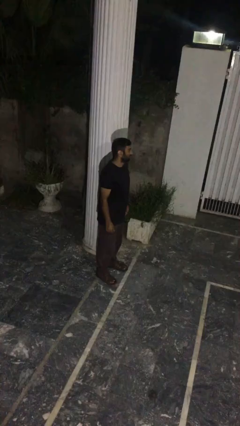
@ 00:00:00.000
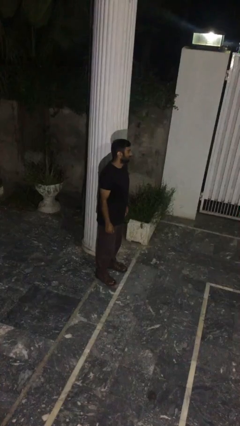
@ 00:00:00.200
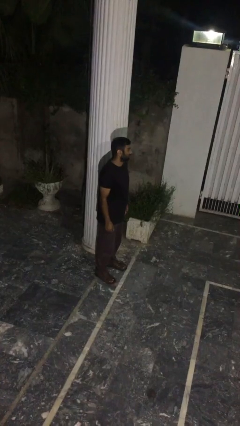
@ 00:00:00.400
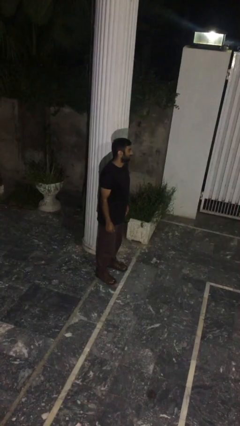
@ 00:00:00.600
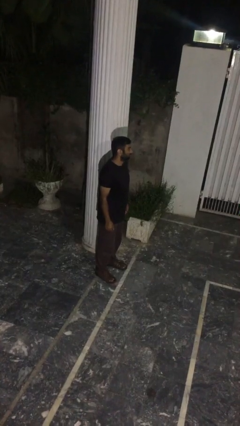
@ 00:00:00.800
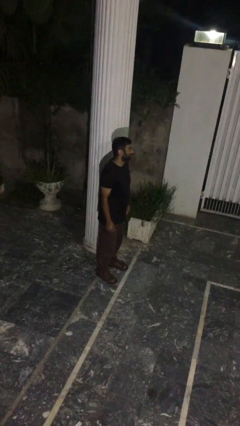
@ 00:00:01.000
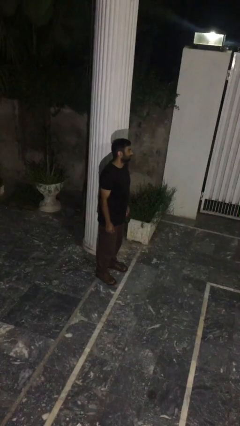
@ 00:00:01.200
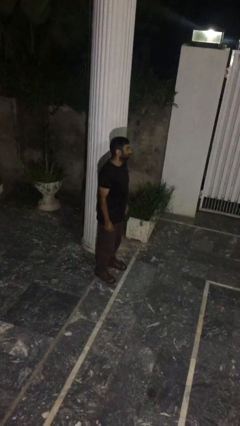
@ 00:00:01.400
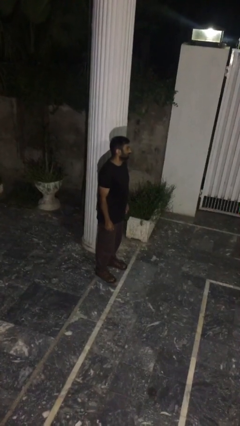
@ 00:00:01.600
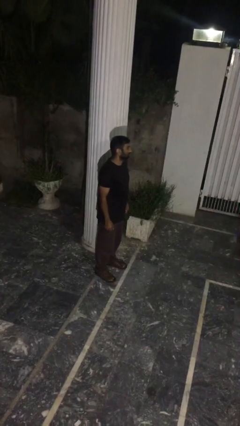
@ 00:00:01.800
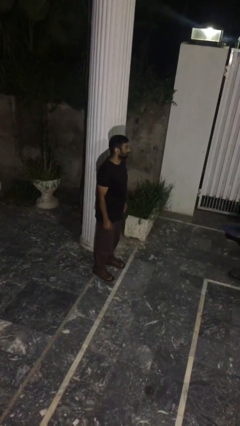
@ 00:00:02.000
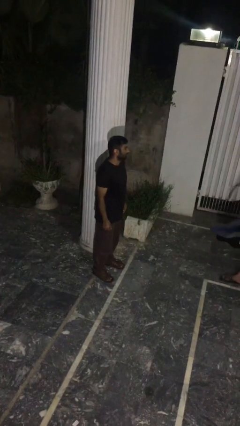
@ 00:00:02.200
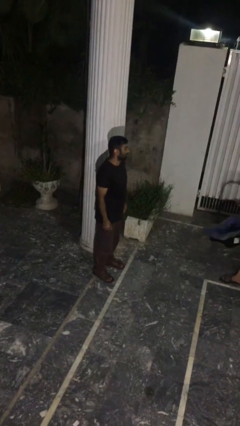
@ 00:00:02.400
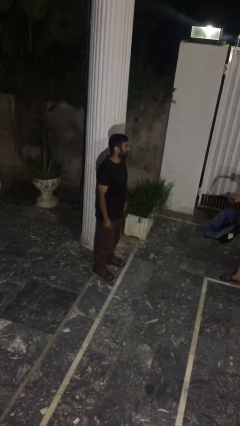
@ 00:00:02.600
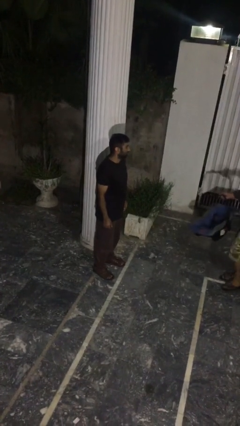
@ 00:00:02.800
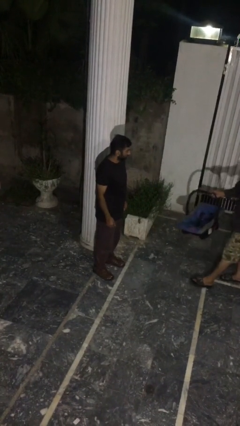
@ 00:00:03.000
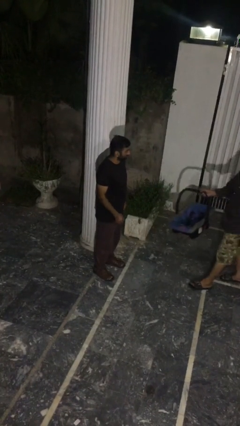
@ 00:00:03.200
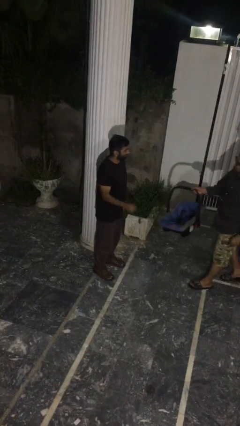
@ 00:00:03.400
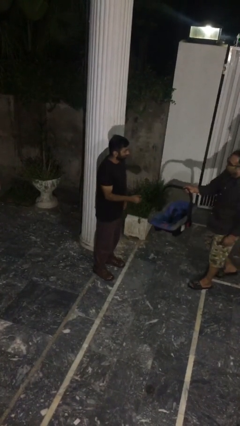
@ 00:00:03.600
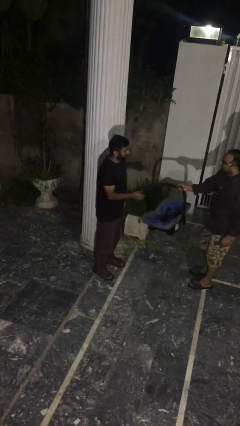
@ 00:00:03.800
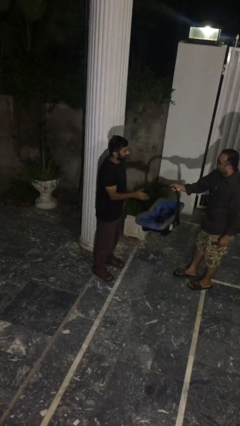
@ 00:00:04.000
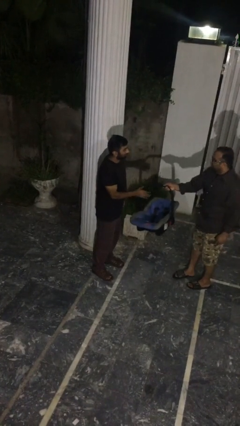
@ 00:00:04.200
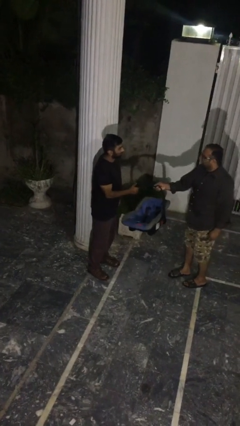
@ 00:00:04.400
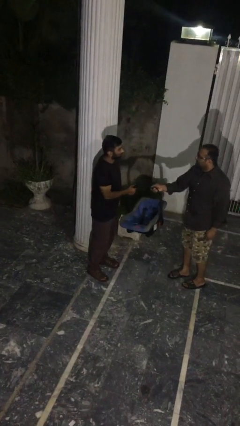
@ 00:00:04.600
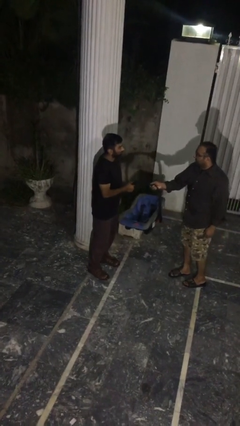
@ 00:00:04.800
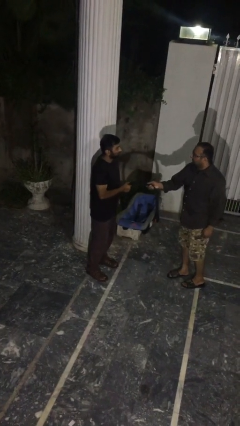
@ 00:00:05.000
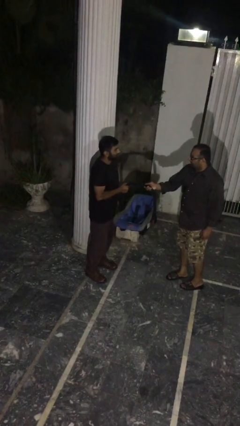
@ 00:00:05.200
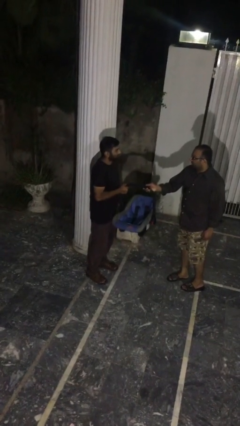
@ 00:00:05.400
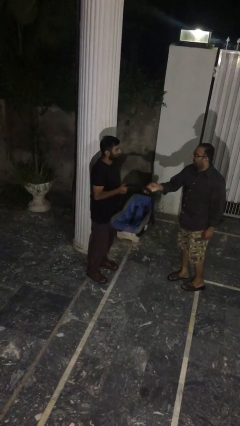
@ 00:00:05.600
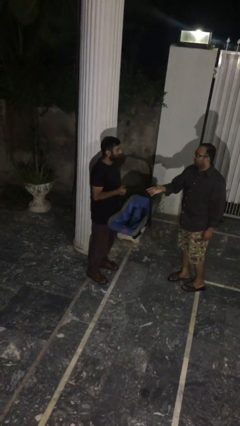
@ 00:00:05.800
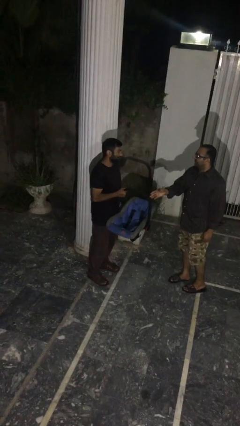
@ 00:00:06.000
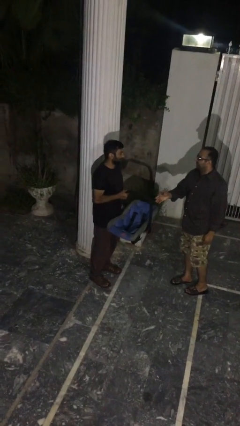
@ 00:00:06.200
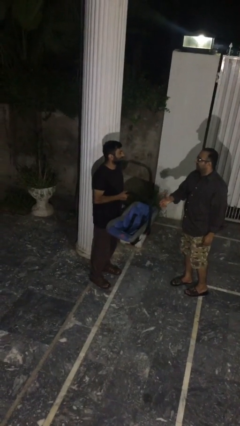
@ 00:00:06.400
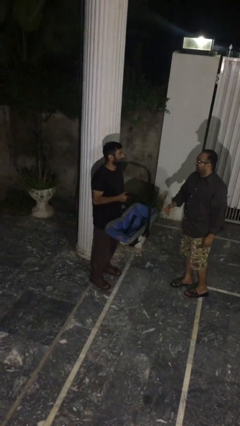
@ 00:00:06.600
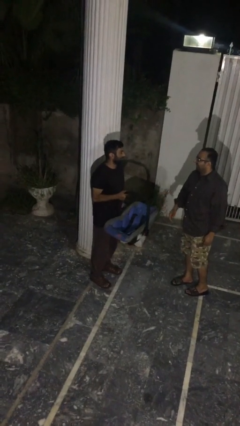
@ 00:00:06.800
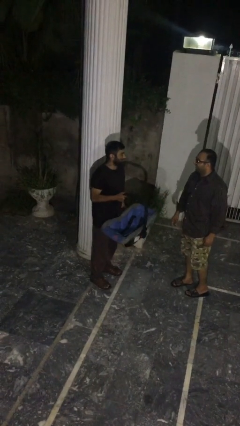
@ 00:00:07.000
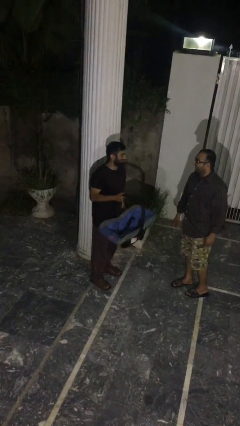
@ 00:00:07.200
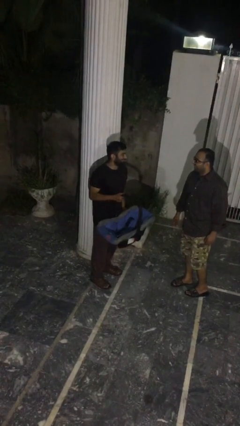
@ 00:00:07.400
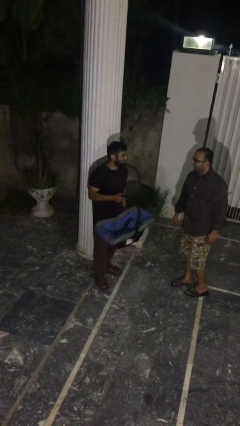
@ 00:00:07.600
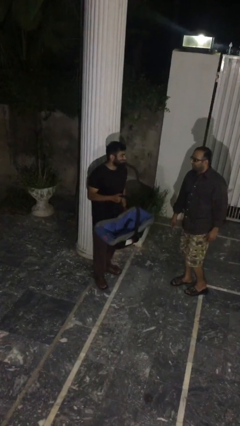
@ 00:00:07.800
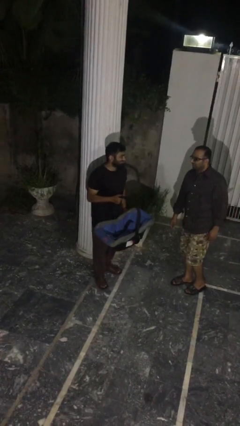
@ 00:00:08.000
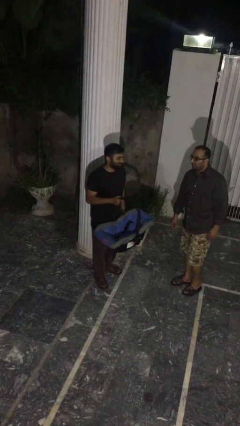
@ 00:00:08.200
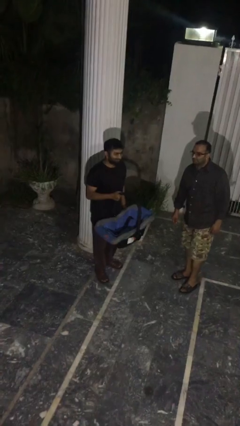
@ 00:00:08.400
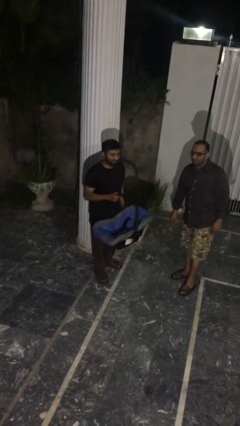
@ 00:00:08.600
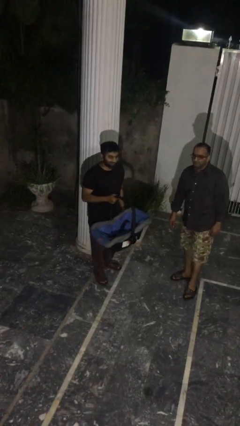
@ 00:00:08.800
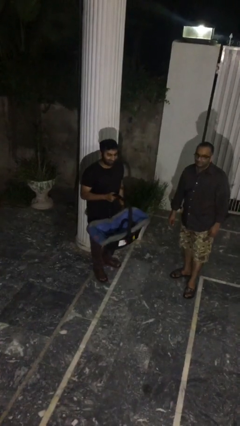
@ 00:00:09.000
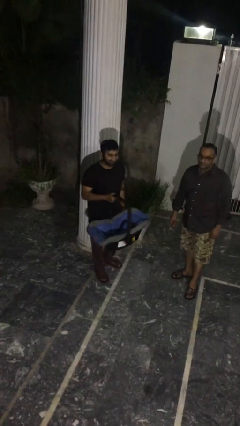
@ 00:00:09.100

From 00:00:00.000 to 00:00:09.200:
person transfers object to person

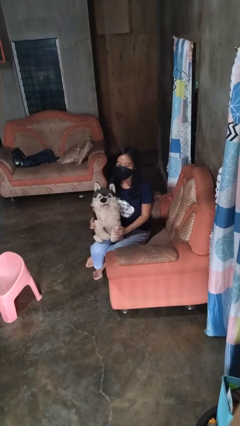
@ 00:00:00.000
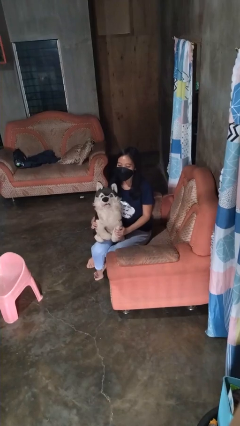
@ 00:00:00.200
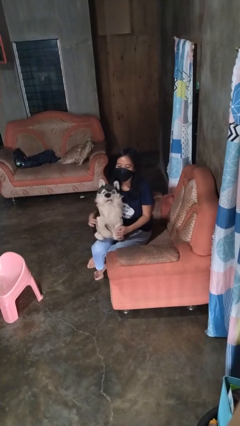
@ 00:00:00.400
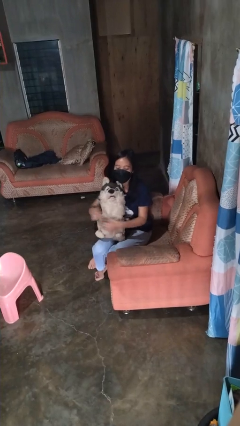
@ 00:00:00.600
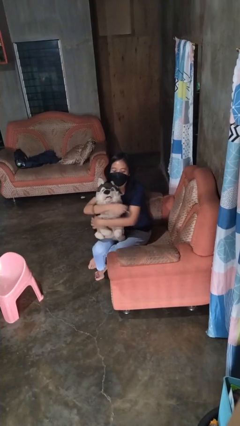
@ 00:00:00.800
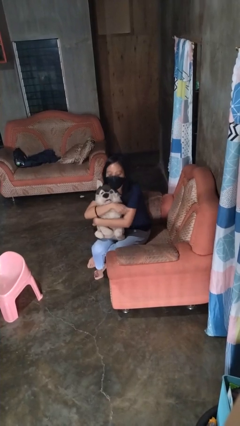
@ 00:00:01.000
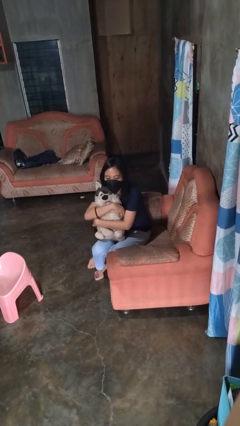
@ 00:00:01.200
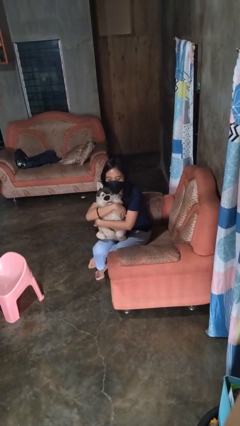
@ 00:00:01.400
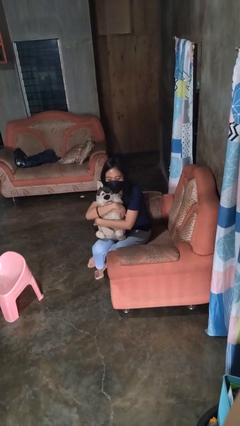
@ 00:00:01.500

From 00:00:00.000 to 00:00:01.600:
person hugs stuffed animal

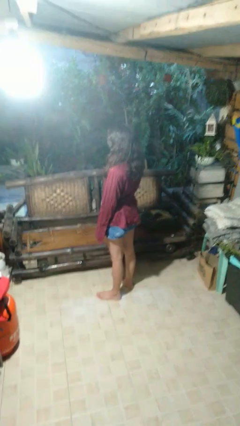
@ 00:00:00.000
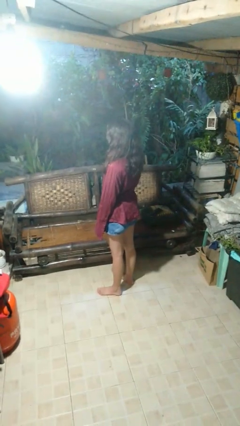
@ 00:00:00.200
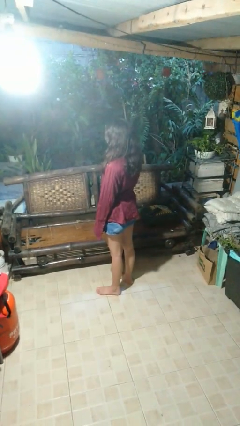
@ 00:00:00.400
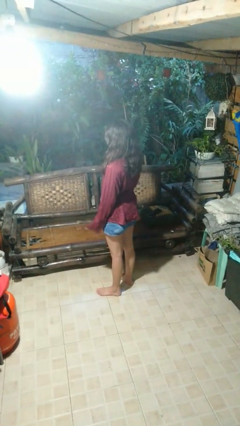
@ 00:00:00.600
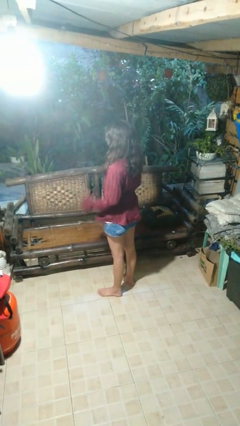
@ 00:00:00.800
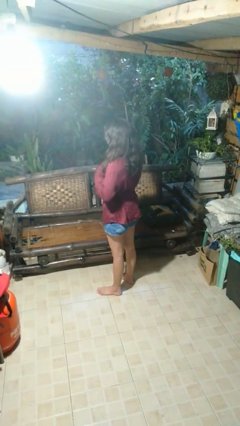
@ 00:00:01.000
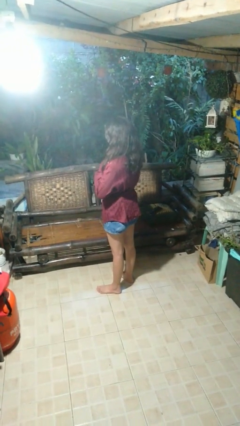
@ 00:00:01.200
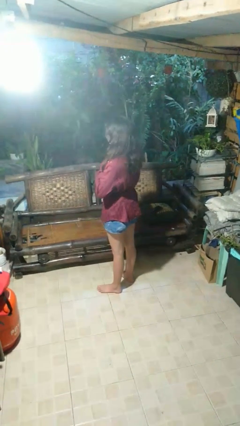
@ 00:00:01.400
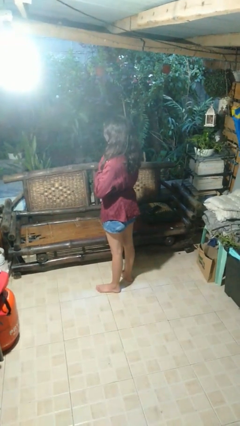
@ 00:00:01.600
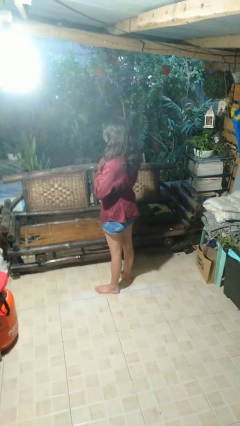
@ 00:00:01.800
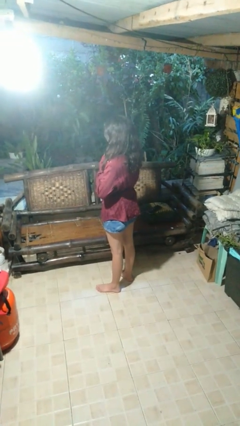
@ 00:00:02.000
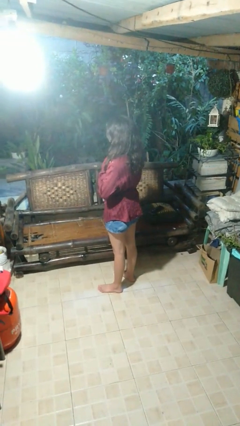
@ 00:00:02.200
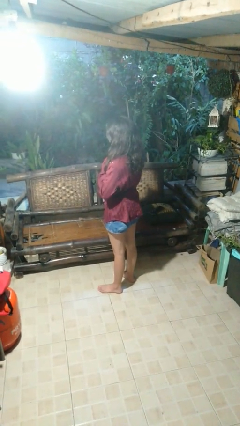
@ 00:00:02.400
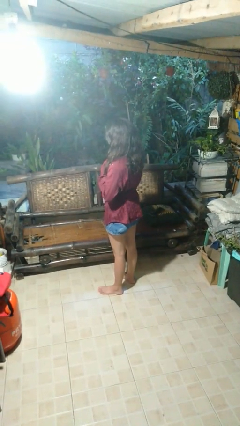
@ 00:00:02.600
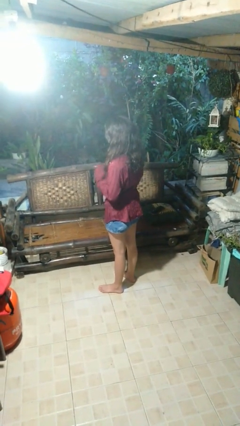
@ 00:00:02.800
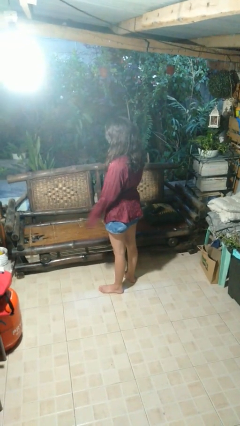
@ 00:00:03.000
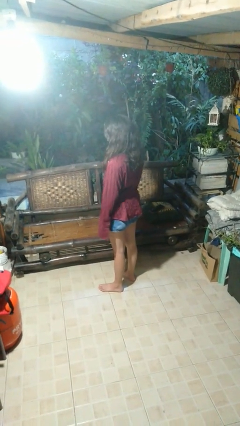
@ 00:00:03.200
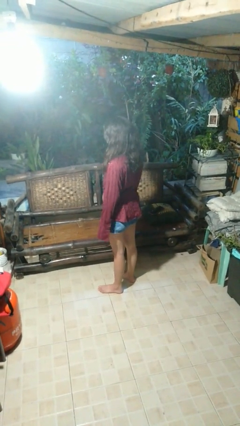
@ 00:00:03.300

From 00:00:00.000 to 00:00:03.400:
person unbuttons shirt

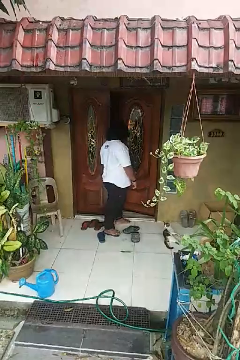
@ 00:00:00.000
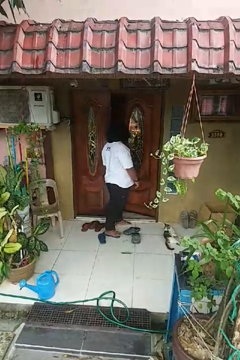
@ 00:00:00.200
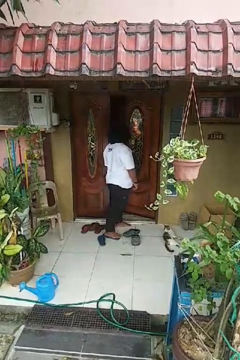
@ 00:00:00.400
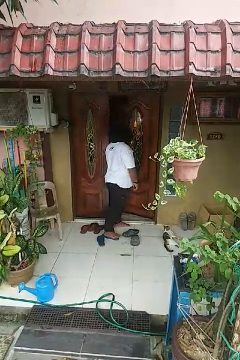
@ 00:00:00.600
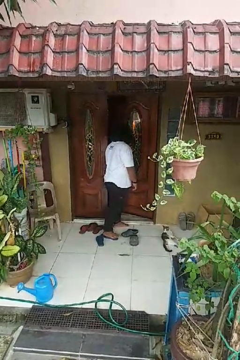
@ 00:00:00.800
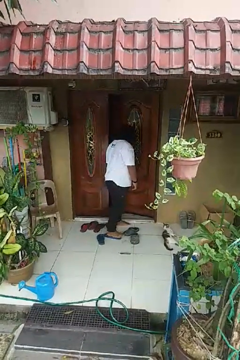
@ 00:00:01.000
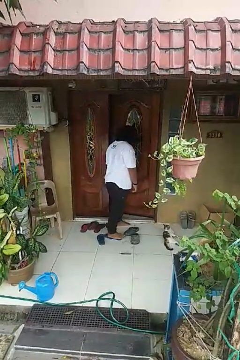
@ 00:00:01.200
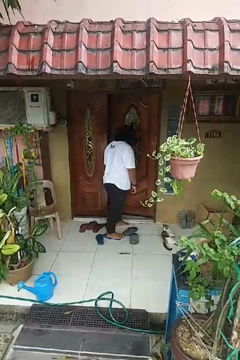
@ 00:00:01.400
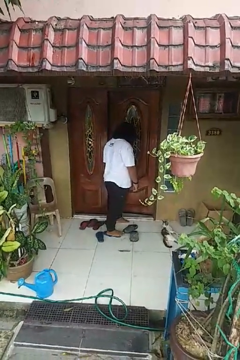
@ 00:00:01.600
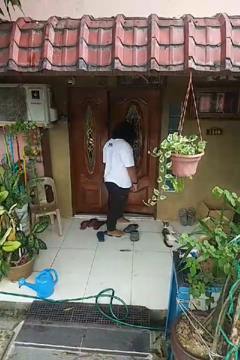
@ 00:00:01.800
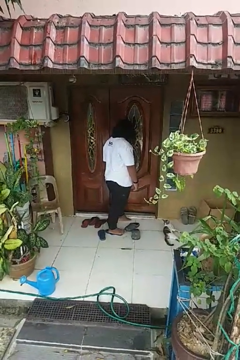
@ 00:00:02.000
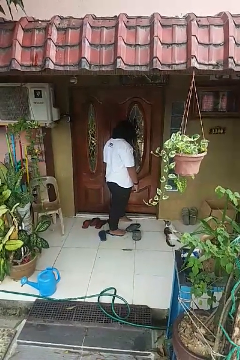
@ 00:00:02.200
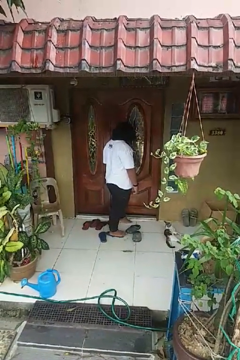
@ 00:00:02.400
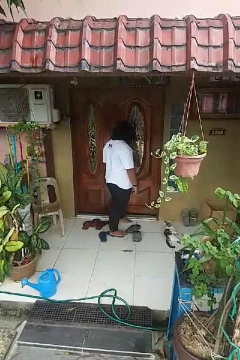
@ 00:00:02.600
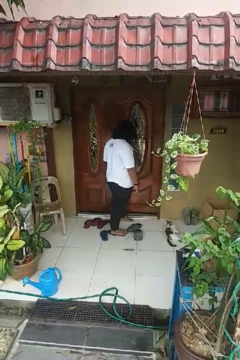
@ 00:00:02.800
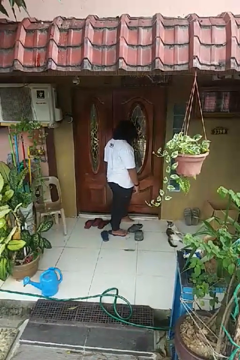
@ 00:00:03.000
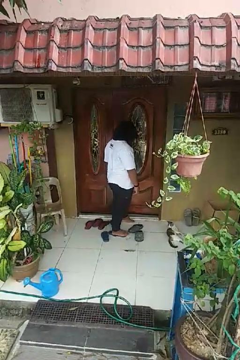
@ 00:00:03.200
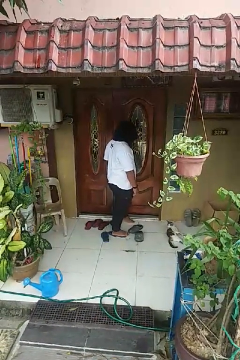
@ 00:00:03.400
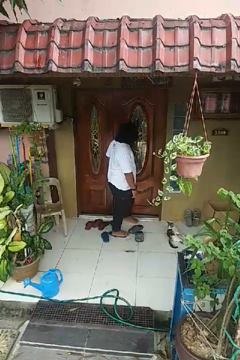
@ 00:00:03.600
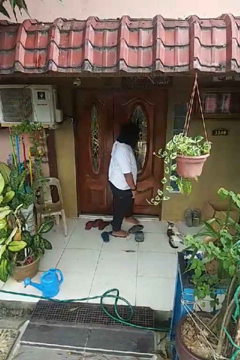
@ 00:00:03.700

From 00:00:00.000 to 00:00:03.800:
person closes door with hip
